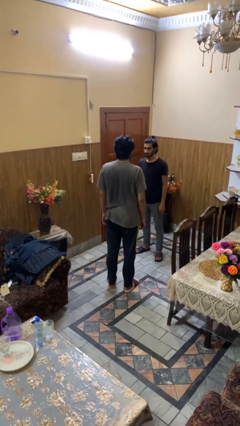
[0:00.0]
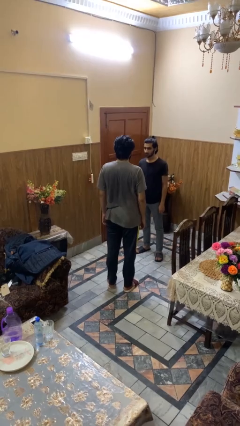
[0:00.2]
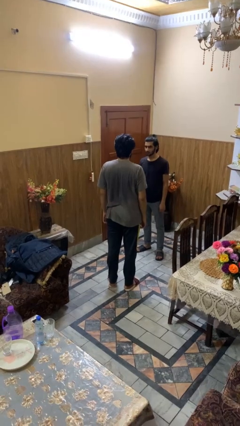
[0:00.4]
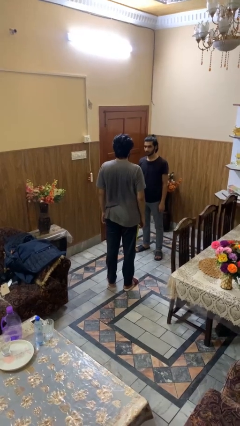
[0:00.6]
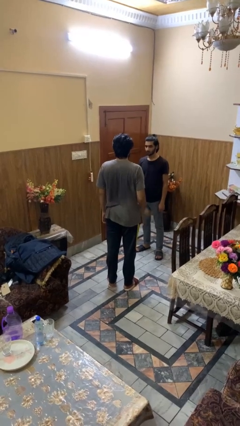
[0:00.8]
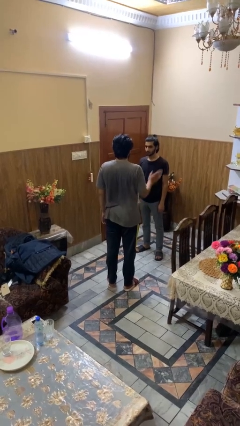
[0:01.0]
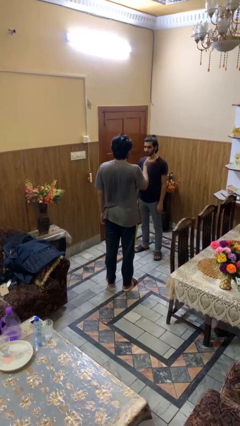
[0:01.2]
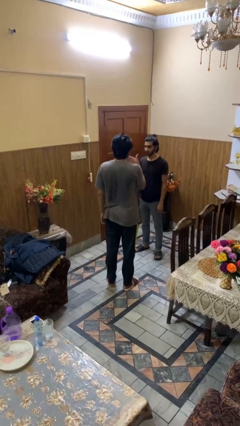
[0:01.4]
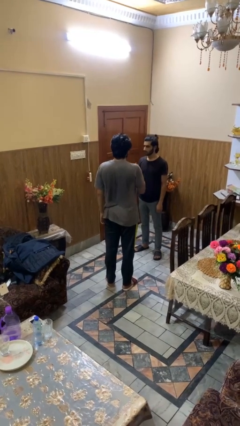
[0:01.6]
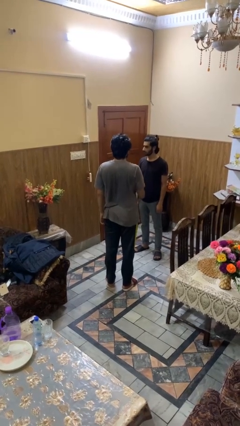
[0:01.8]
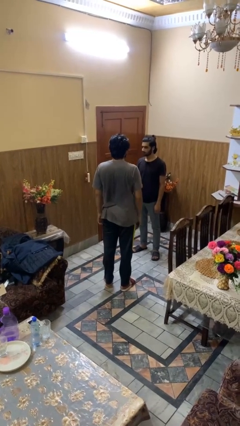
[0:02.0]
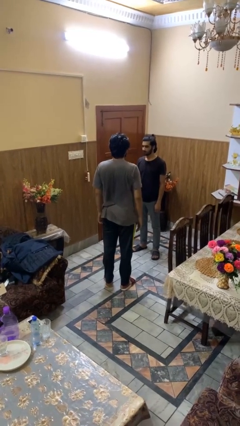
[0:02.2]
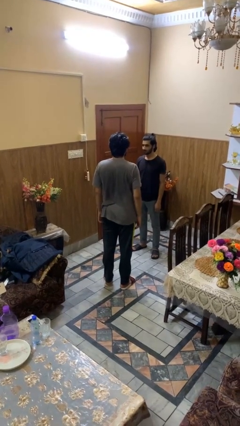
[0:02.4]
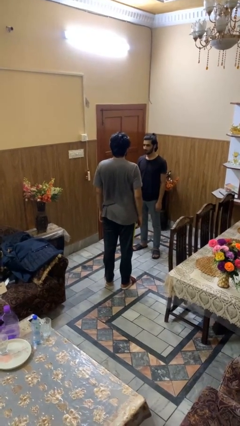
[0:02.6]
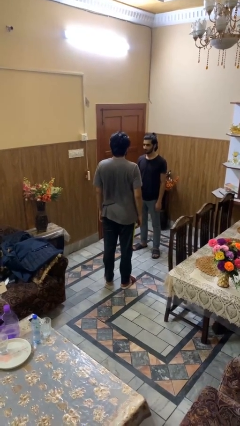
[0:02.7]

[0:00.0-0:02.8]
person shoves person

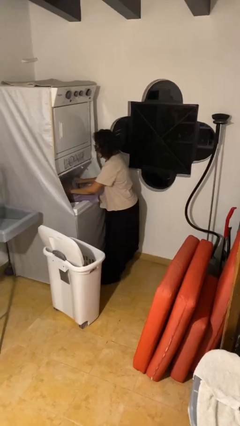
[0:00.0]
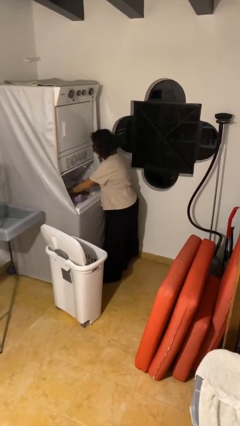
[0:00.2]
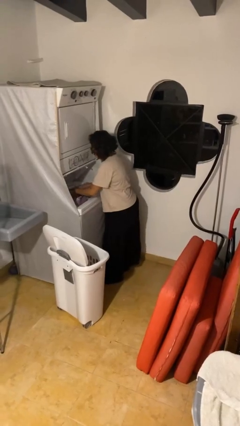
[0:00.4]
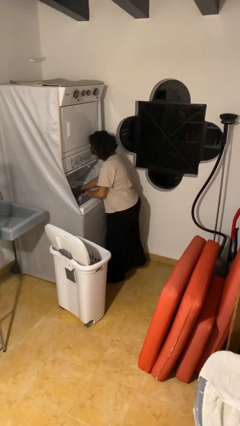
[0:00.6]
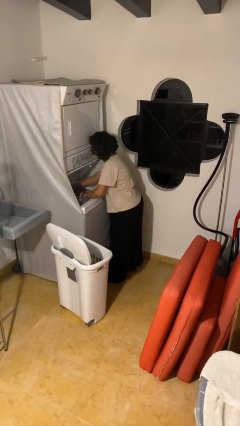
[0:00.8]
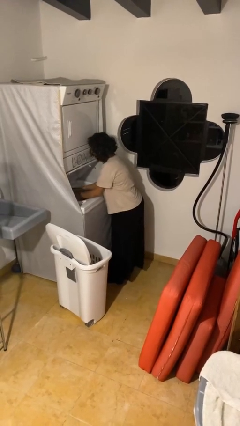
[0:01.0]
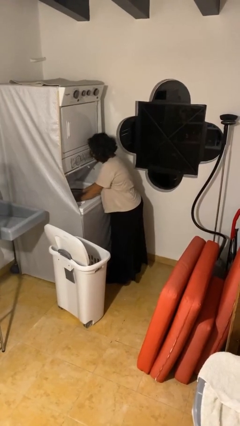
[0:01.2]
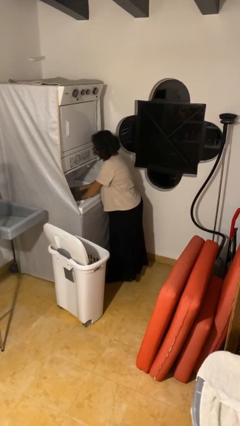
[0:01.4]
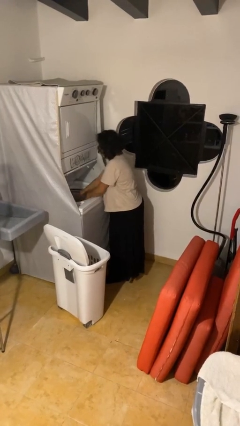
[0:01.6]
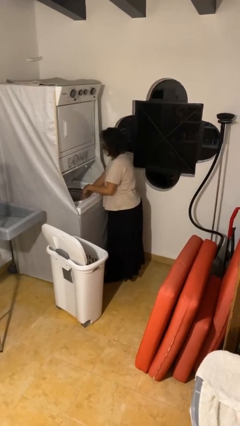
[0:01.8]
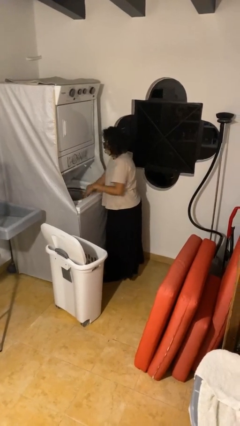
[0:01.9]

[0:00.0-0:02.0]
person loads clotheswasher

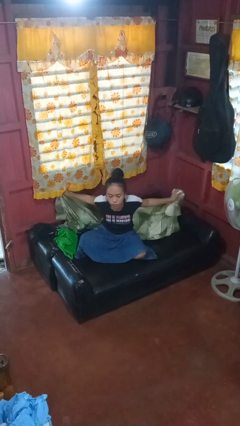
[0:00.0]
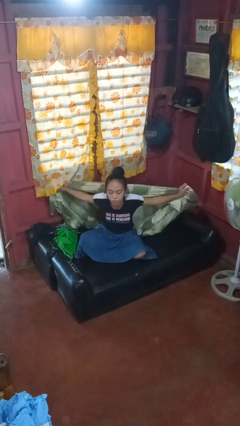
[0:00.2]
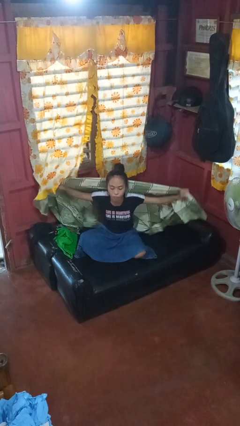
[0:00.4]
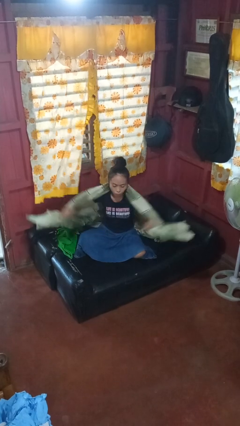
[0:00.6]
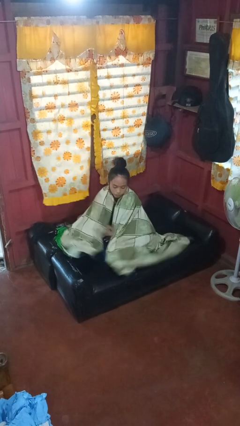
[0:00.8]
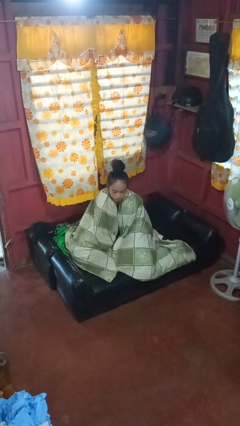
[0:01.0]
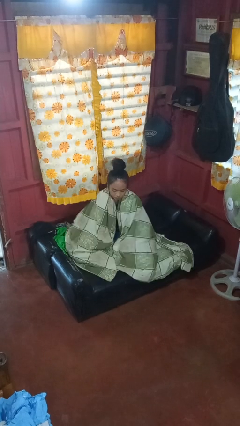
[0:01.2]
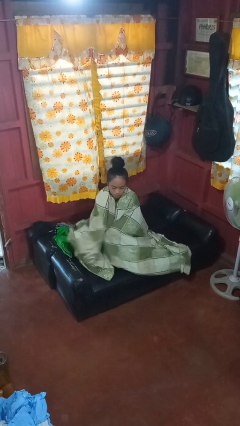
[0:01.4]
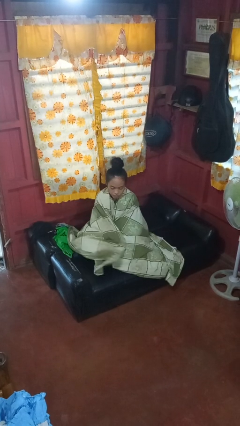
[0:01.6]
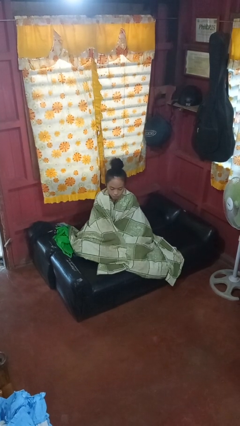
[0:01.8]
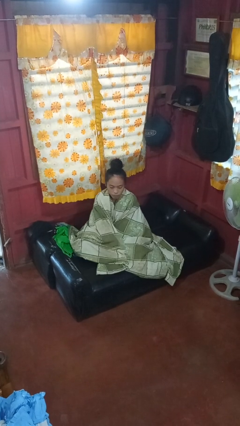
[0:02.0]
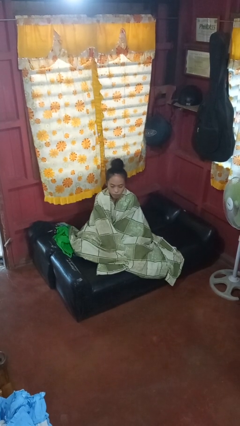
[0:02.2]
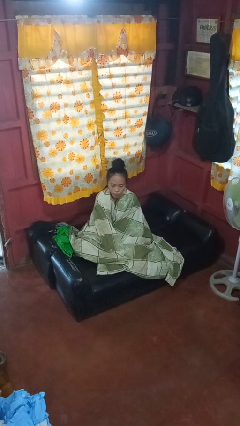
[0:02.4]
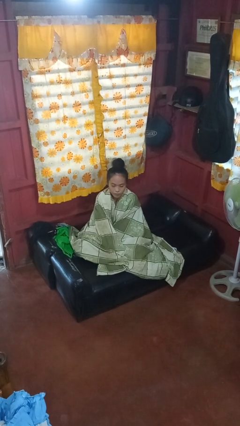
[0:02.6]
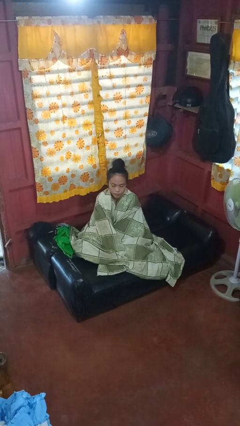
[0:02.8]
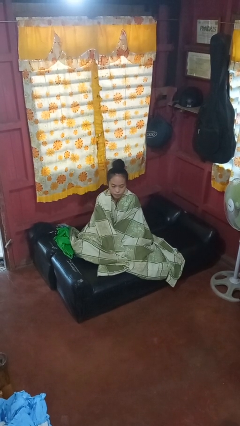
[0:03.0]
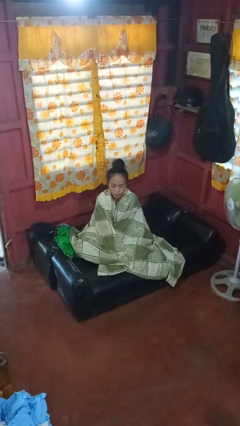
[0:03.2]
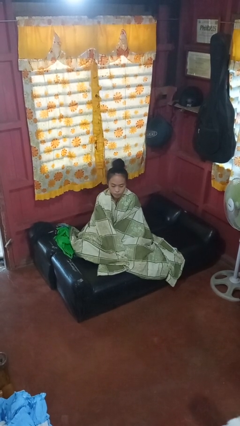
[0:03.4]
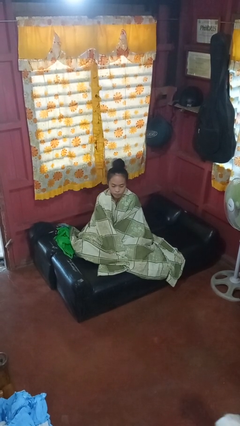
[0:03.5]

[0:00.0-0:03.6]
person covers with blanket

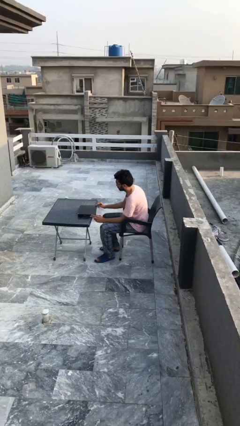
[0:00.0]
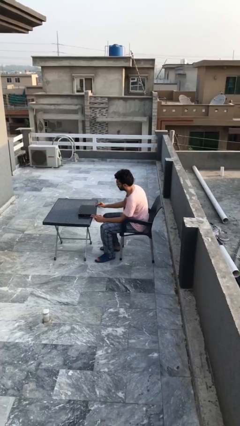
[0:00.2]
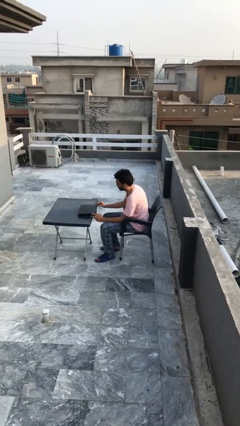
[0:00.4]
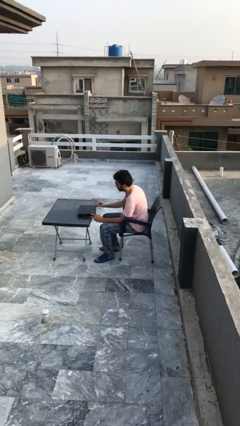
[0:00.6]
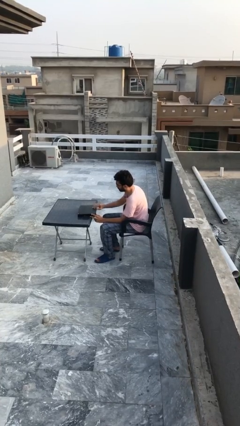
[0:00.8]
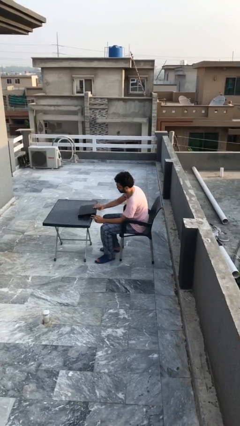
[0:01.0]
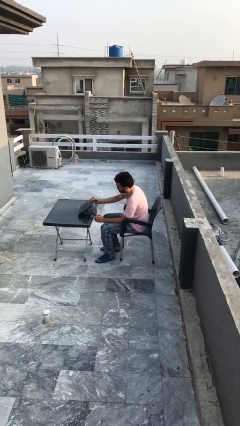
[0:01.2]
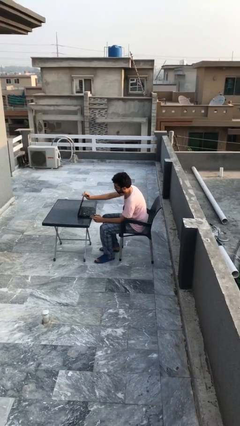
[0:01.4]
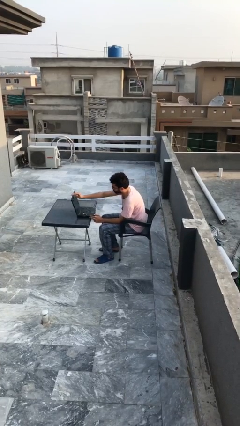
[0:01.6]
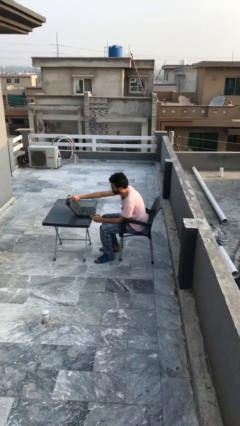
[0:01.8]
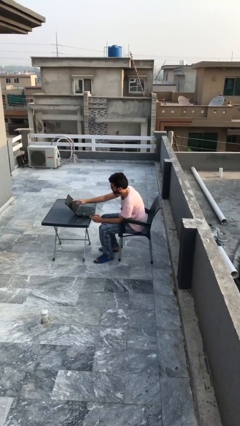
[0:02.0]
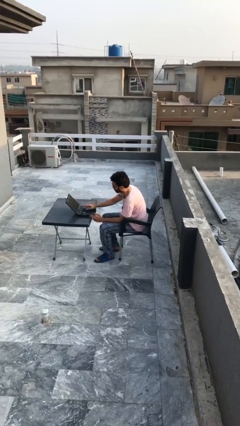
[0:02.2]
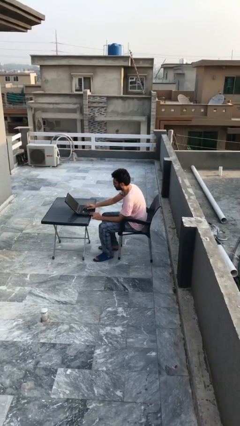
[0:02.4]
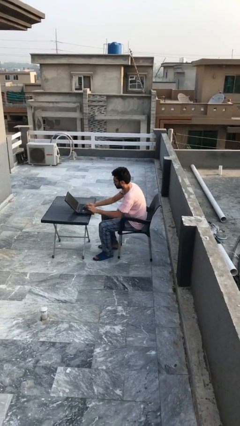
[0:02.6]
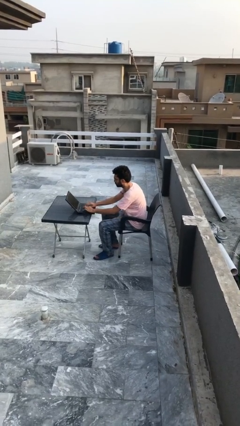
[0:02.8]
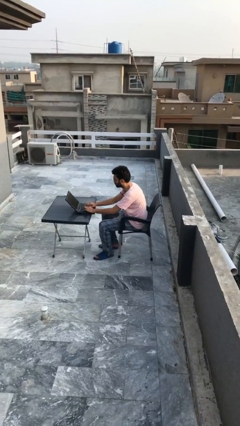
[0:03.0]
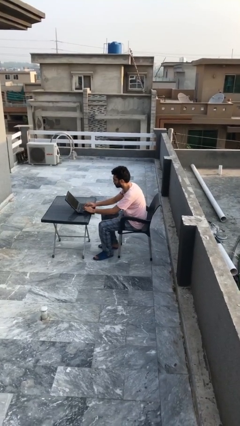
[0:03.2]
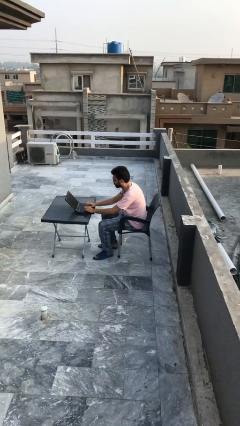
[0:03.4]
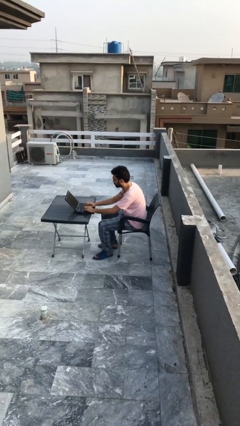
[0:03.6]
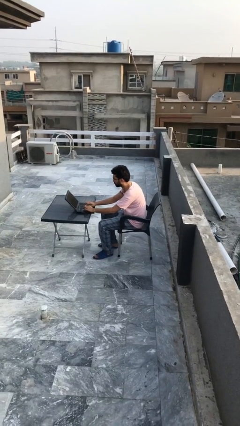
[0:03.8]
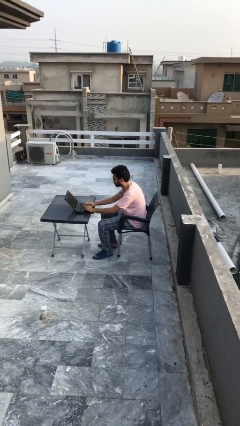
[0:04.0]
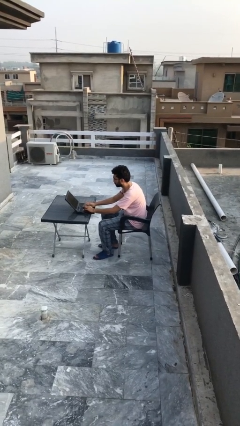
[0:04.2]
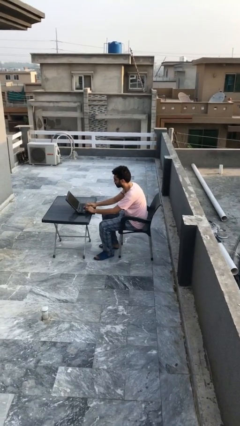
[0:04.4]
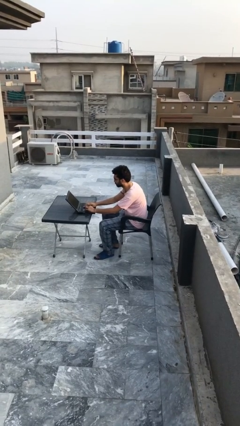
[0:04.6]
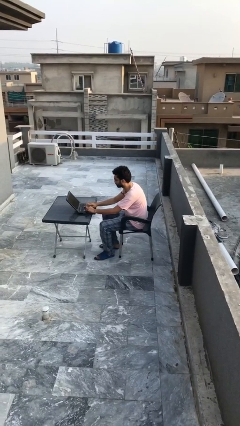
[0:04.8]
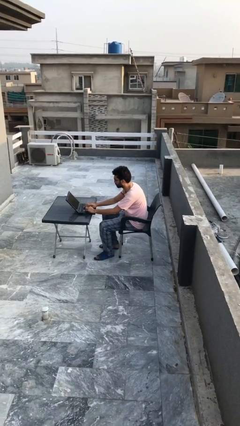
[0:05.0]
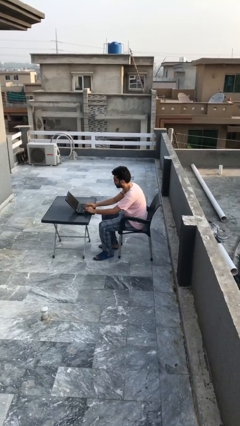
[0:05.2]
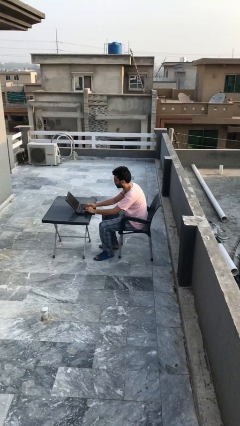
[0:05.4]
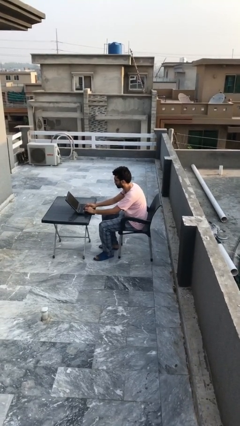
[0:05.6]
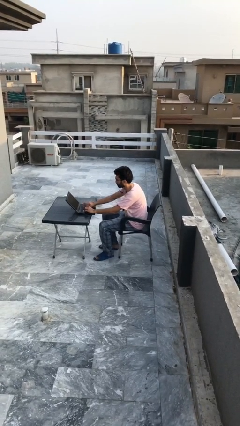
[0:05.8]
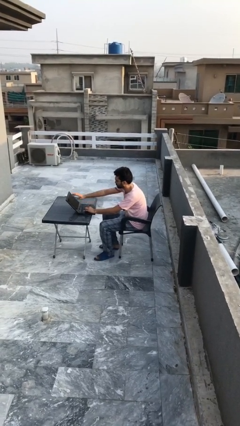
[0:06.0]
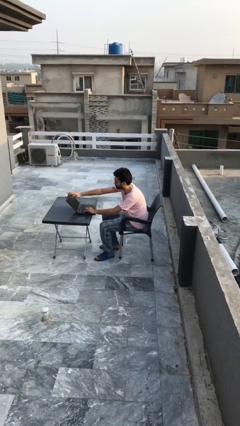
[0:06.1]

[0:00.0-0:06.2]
person interacts with laptop

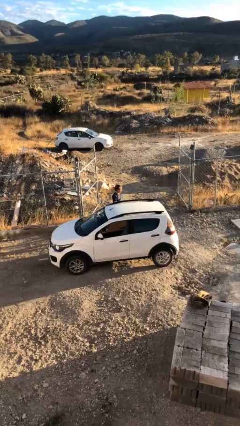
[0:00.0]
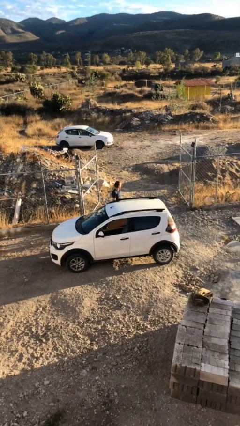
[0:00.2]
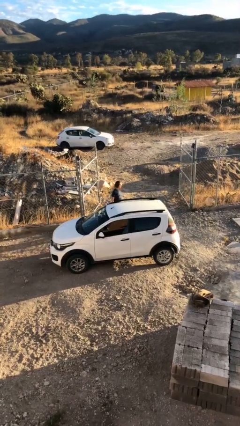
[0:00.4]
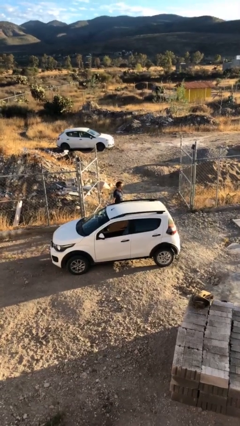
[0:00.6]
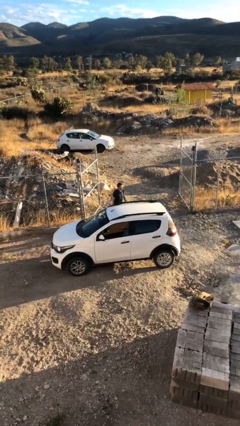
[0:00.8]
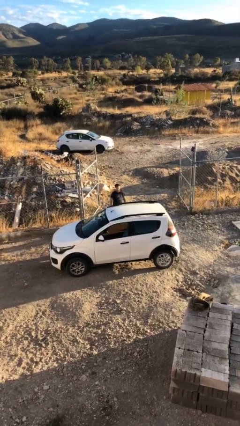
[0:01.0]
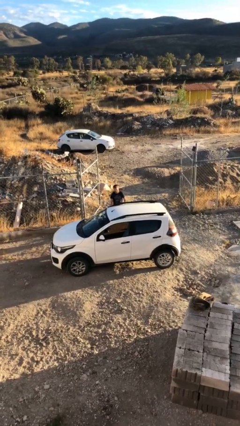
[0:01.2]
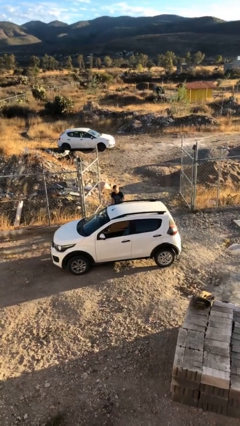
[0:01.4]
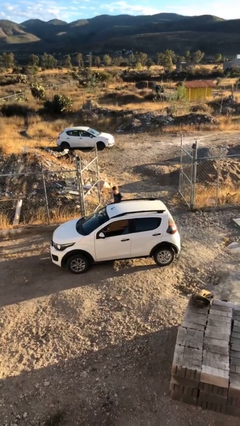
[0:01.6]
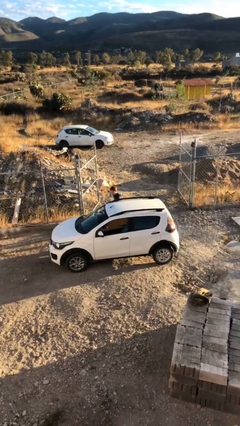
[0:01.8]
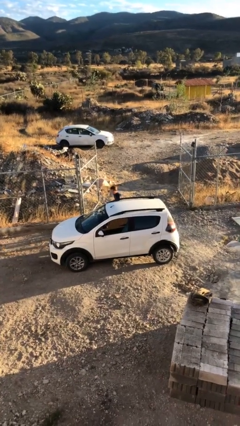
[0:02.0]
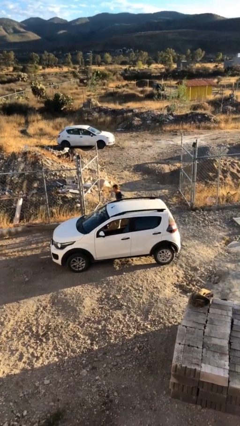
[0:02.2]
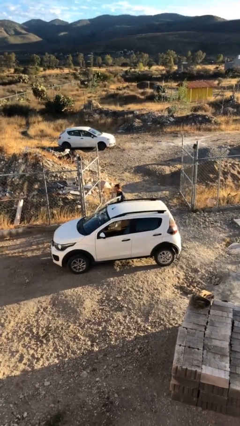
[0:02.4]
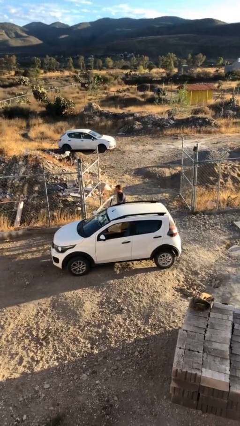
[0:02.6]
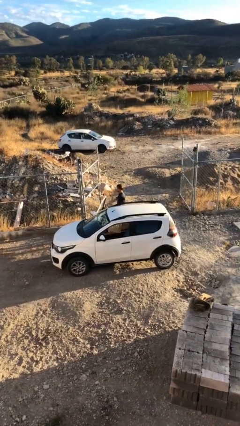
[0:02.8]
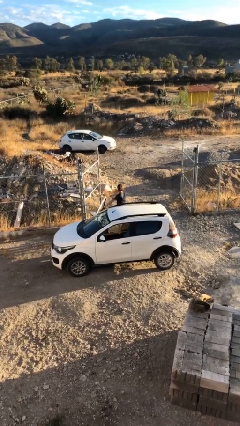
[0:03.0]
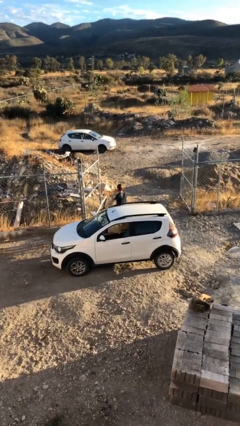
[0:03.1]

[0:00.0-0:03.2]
person opens car door
